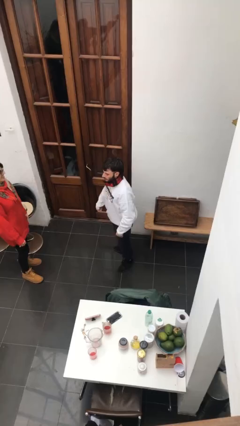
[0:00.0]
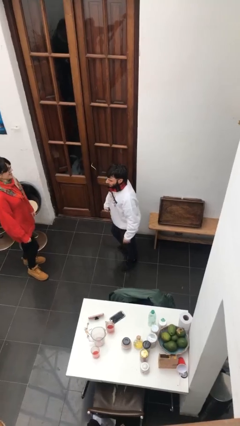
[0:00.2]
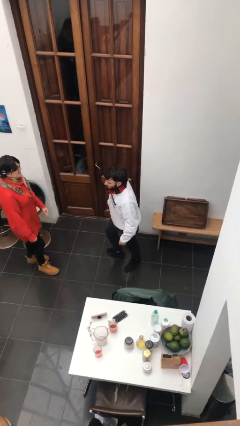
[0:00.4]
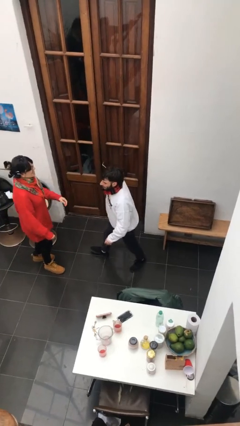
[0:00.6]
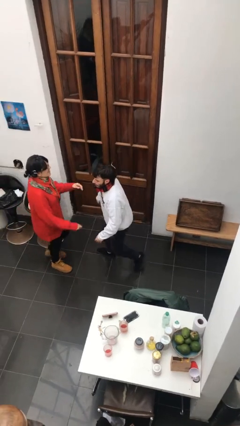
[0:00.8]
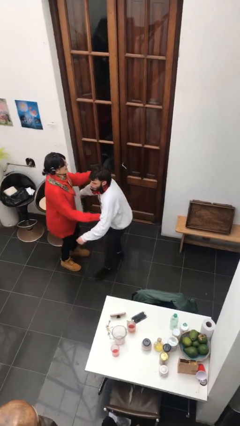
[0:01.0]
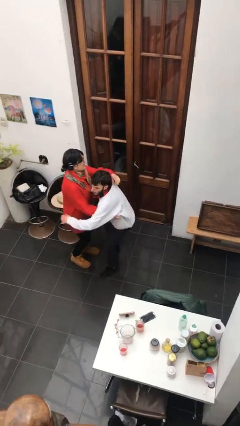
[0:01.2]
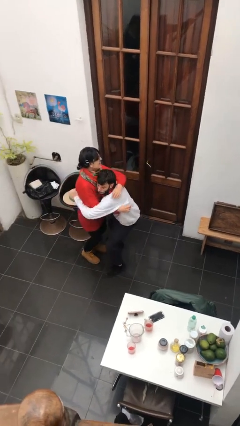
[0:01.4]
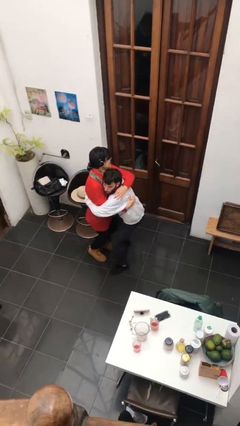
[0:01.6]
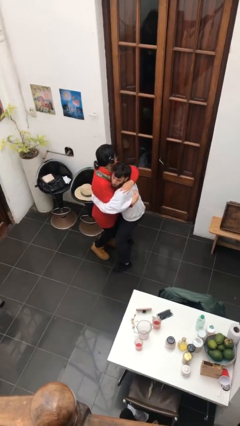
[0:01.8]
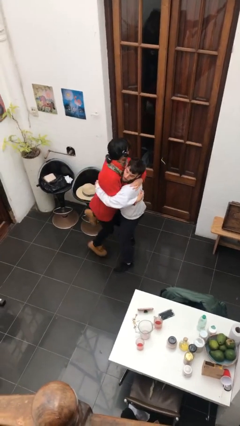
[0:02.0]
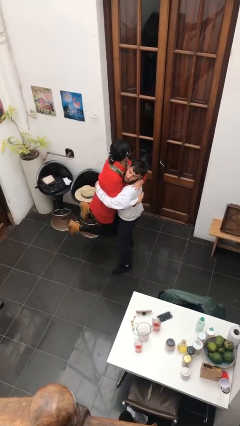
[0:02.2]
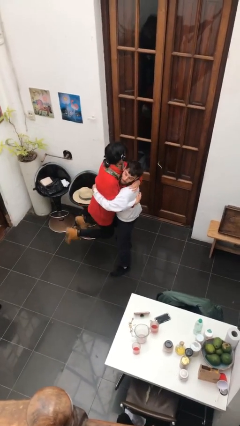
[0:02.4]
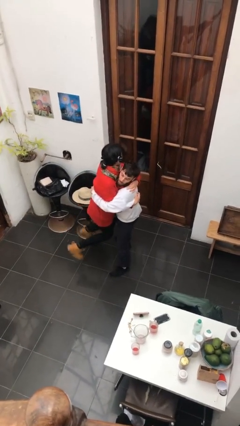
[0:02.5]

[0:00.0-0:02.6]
person picks up person

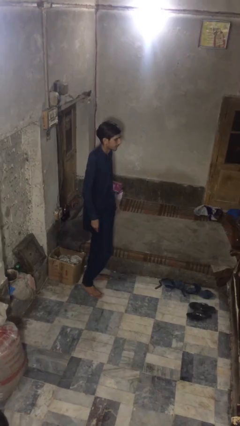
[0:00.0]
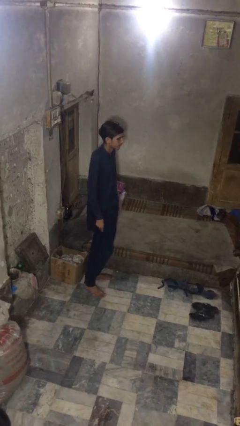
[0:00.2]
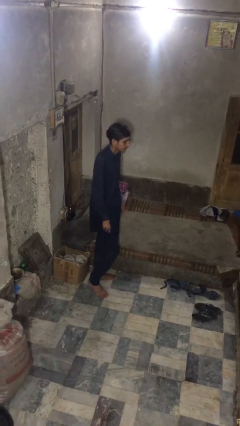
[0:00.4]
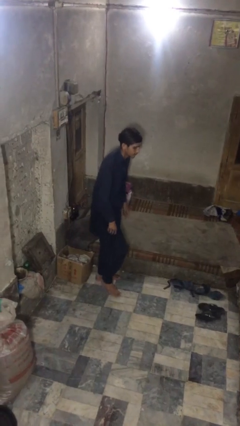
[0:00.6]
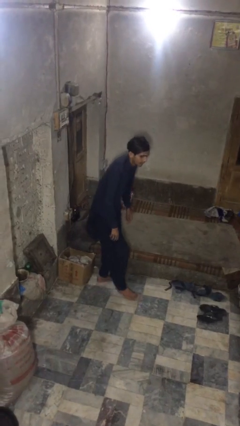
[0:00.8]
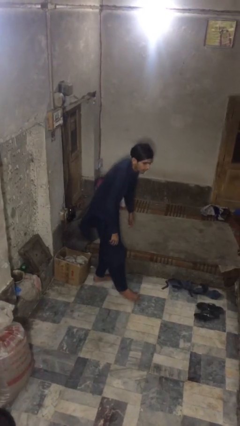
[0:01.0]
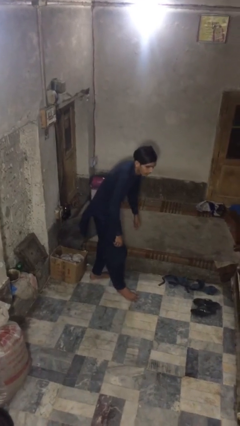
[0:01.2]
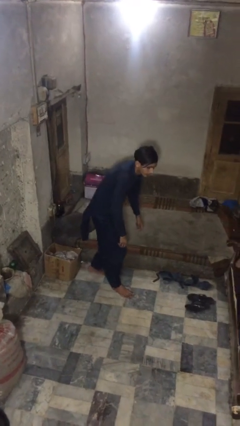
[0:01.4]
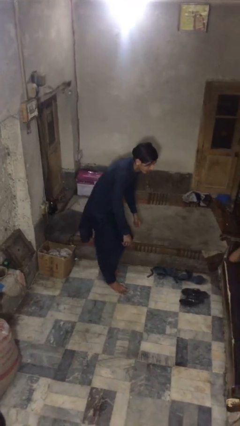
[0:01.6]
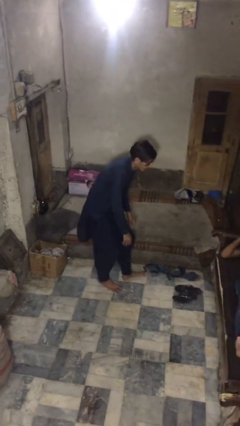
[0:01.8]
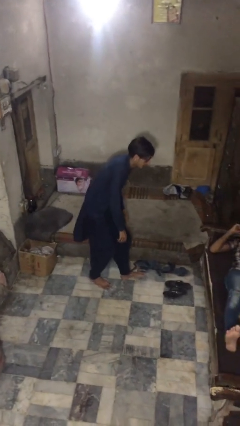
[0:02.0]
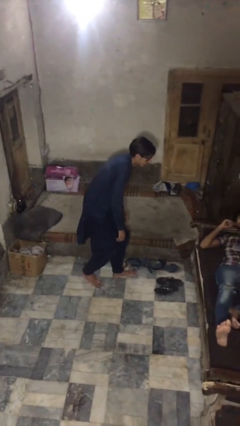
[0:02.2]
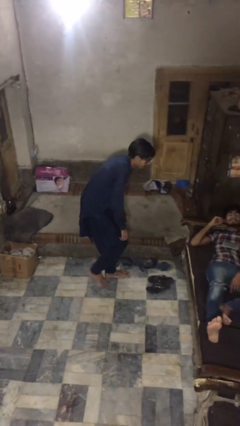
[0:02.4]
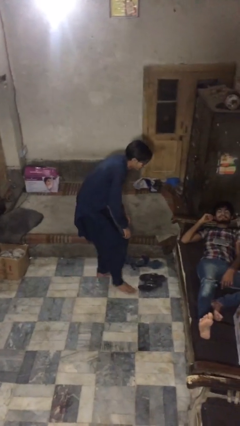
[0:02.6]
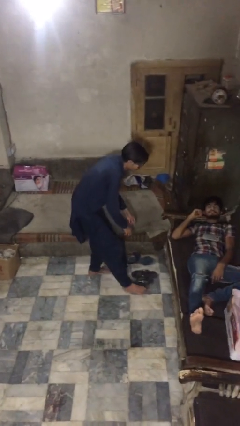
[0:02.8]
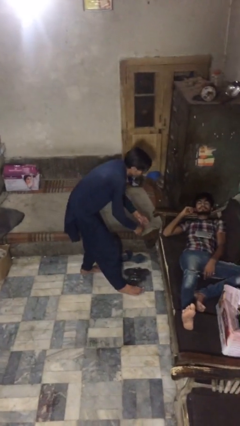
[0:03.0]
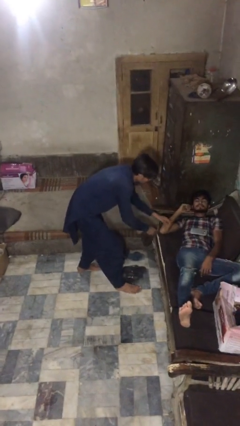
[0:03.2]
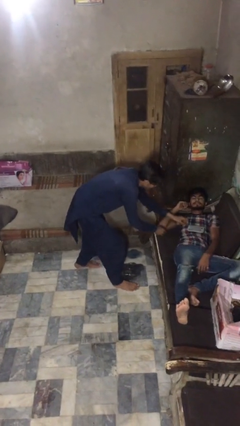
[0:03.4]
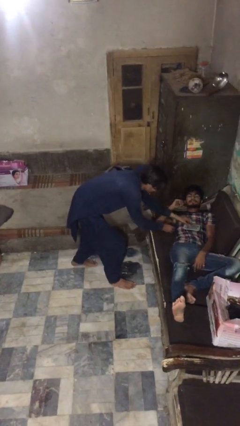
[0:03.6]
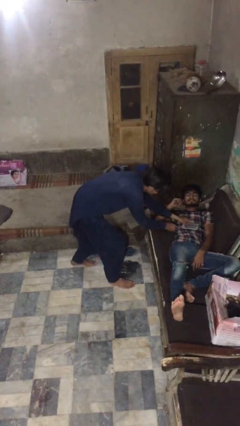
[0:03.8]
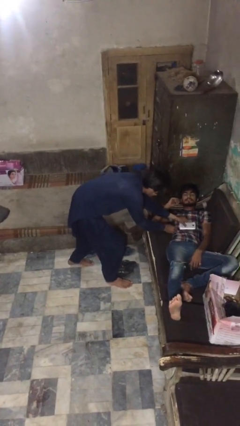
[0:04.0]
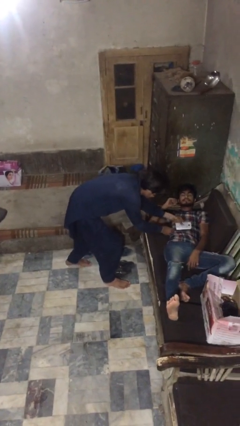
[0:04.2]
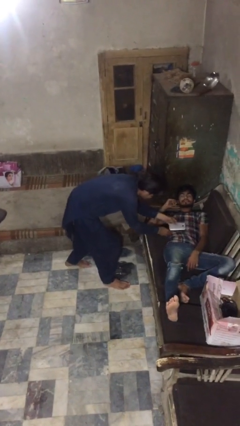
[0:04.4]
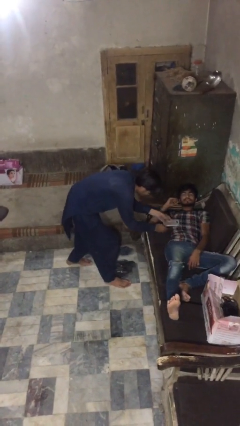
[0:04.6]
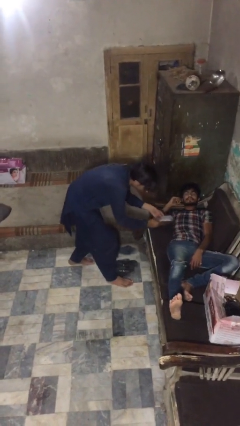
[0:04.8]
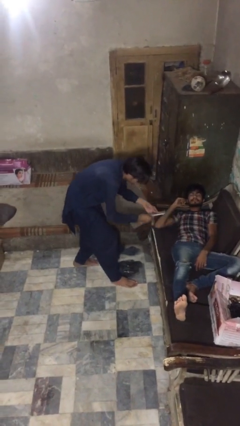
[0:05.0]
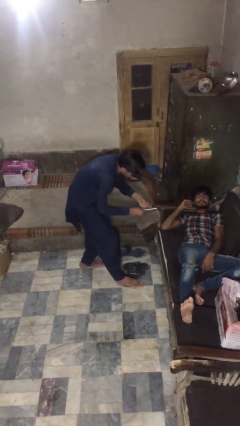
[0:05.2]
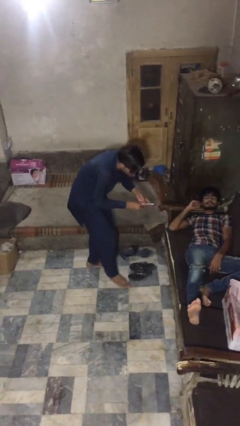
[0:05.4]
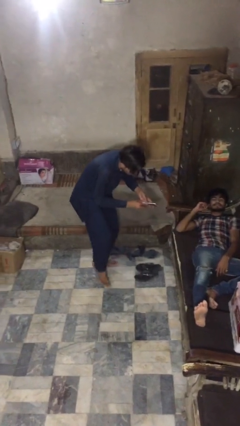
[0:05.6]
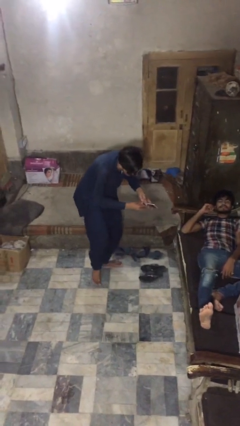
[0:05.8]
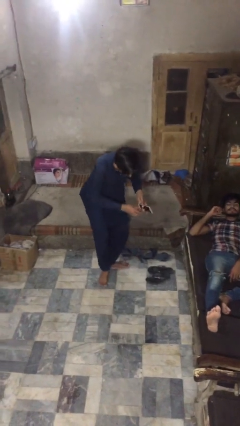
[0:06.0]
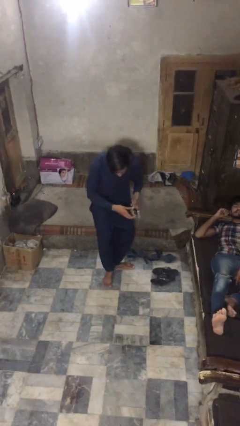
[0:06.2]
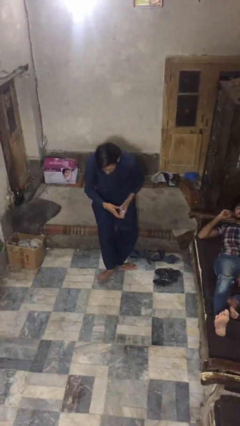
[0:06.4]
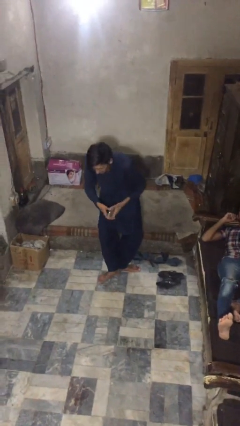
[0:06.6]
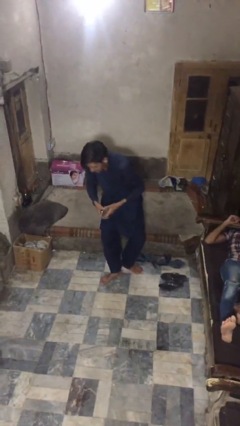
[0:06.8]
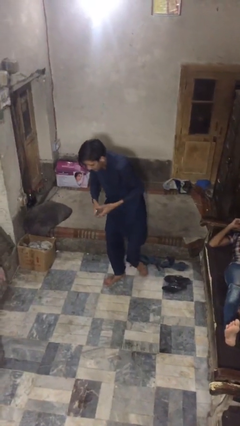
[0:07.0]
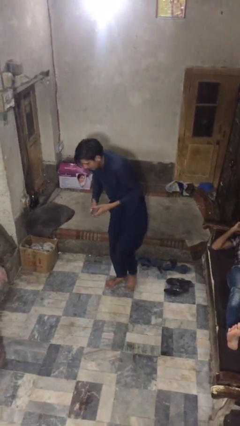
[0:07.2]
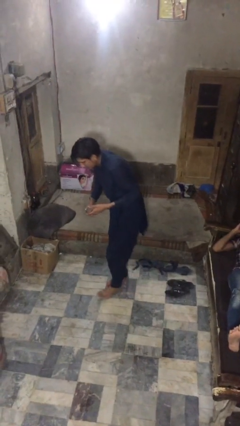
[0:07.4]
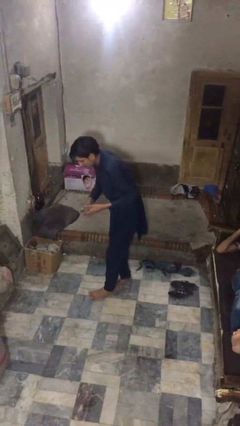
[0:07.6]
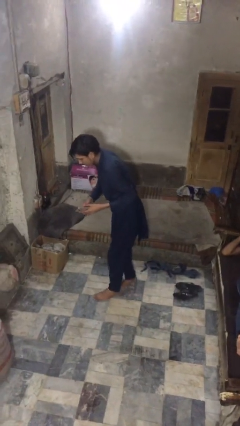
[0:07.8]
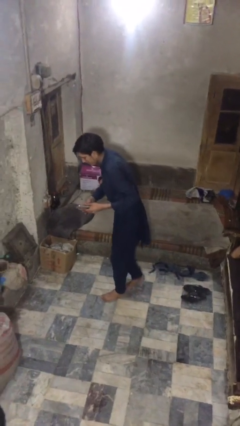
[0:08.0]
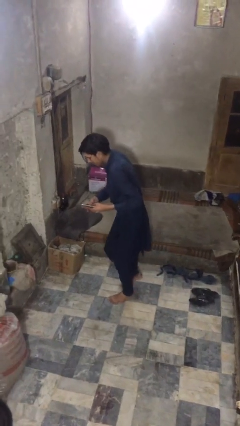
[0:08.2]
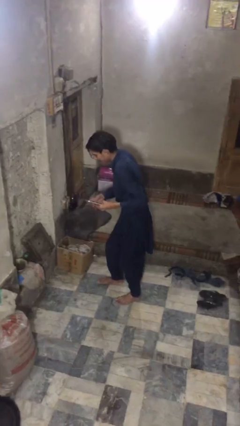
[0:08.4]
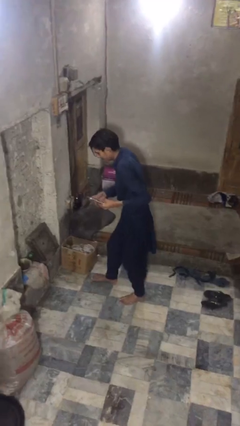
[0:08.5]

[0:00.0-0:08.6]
person steals object from person

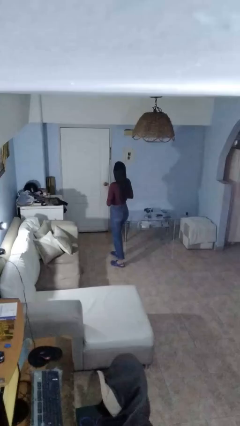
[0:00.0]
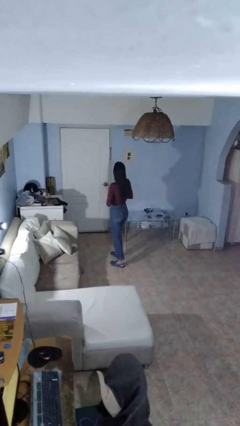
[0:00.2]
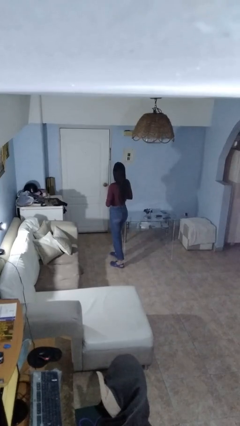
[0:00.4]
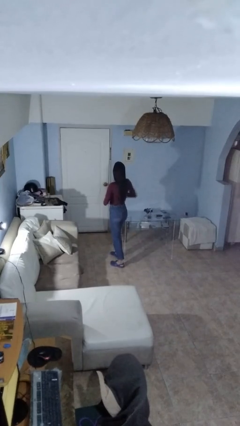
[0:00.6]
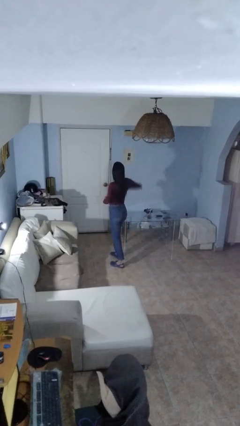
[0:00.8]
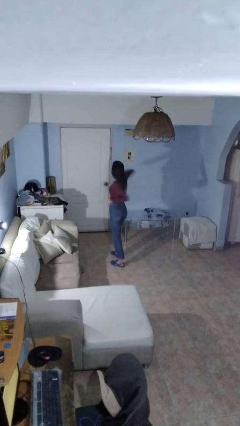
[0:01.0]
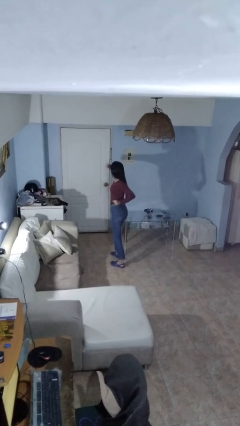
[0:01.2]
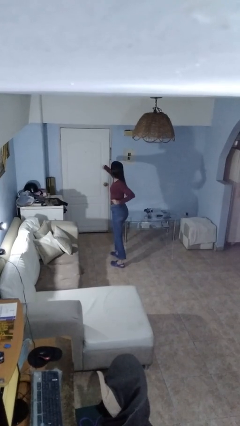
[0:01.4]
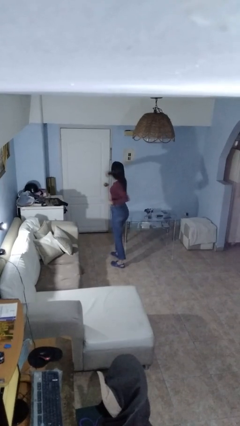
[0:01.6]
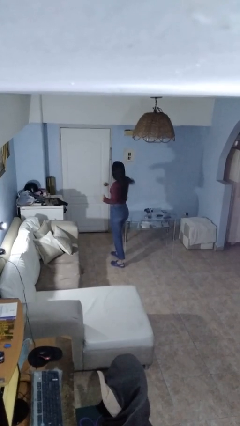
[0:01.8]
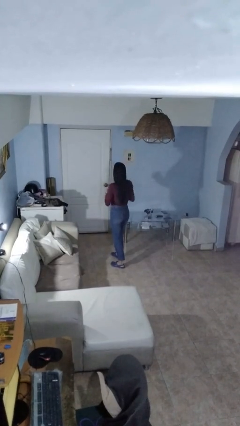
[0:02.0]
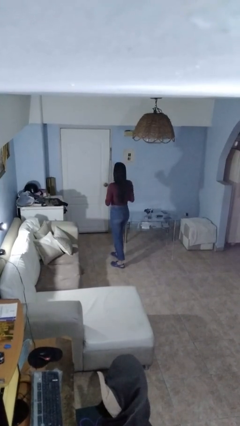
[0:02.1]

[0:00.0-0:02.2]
person karate chop

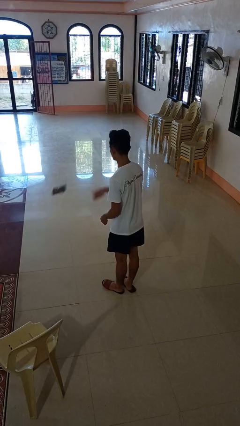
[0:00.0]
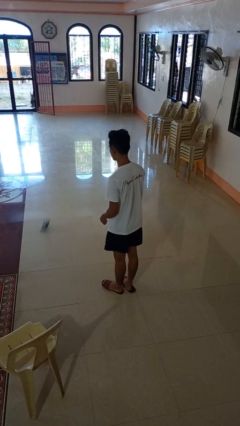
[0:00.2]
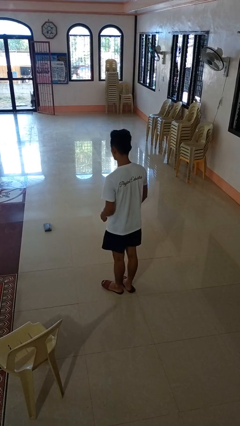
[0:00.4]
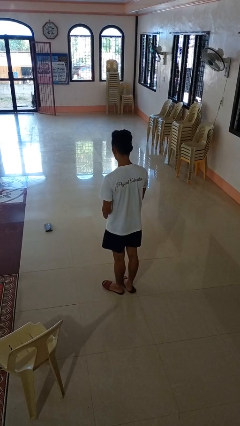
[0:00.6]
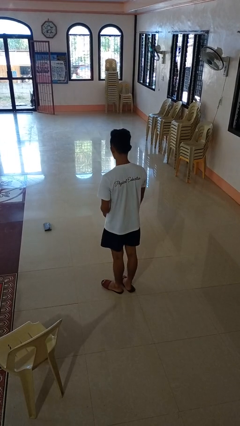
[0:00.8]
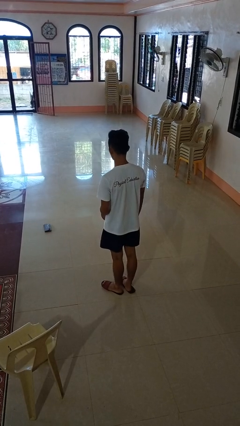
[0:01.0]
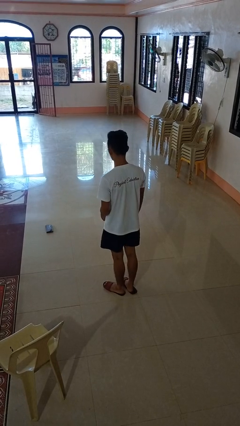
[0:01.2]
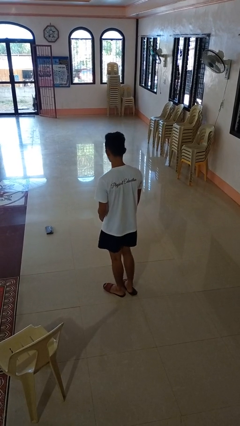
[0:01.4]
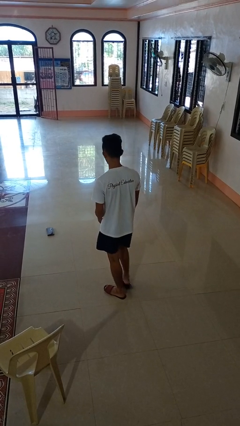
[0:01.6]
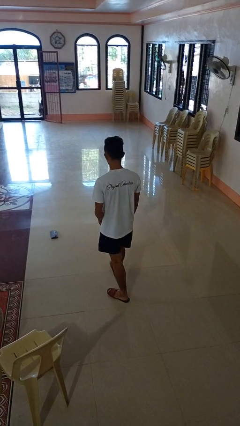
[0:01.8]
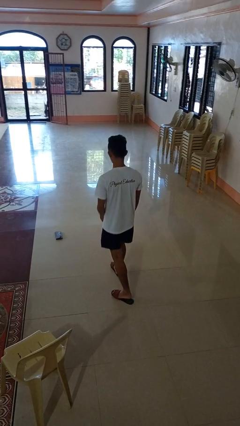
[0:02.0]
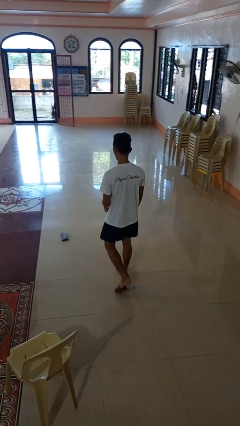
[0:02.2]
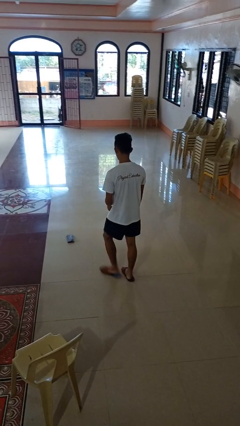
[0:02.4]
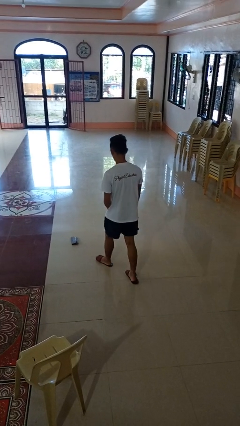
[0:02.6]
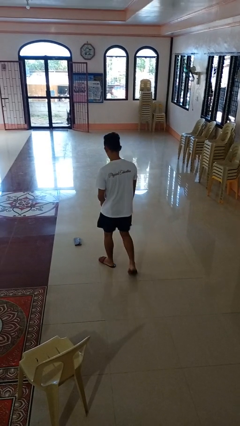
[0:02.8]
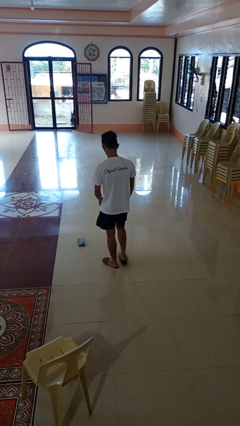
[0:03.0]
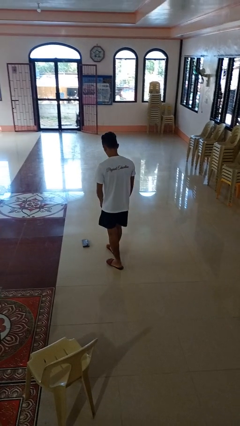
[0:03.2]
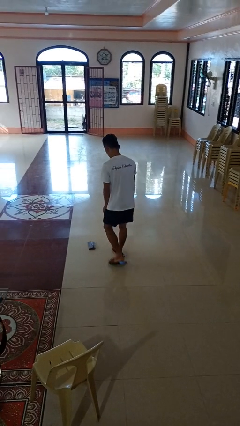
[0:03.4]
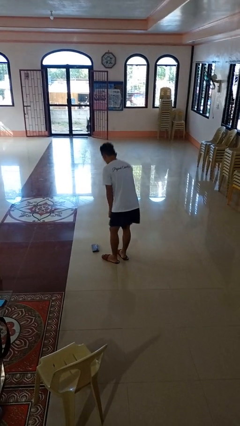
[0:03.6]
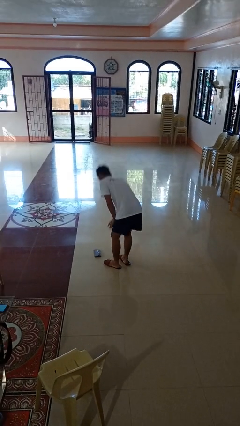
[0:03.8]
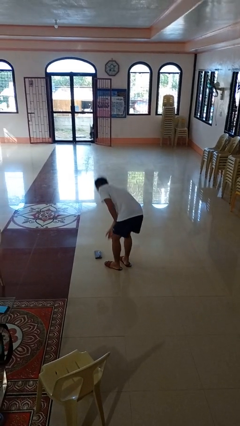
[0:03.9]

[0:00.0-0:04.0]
person throws object to ground
